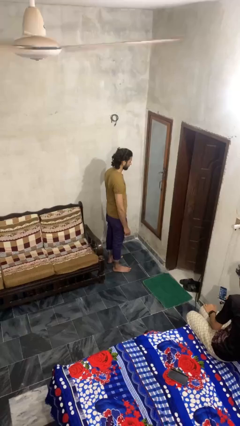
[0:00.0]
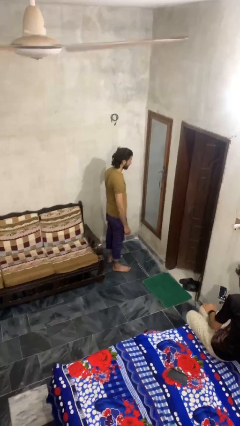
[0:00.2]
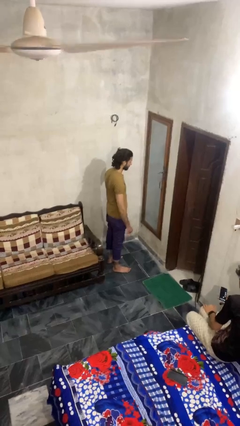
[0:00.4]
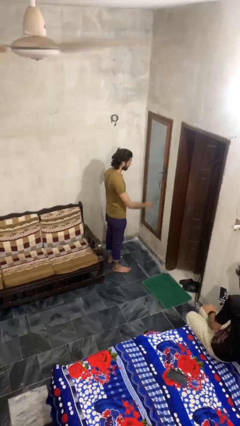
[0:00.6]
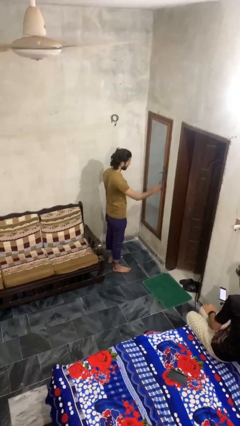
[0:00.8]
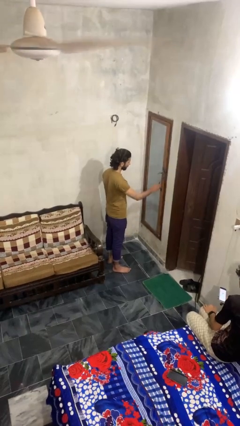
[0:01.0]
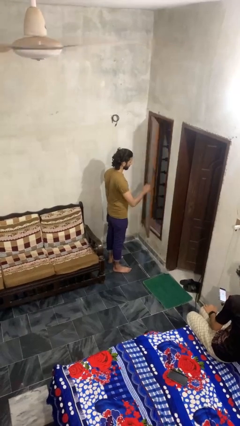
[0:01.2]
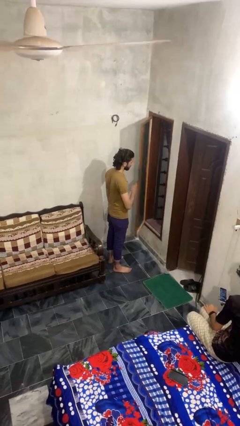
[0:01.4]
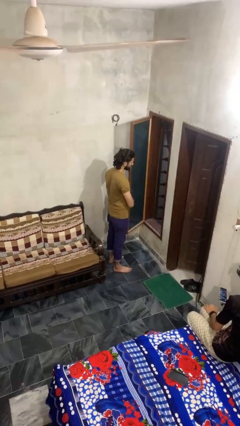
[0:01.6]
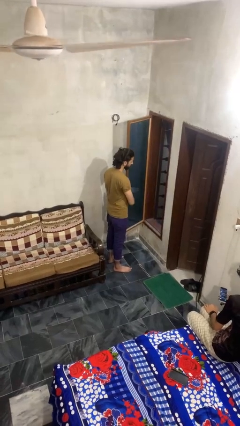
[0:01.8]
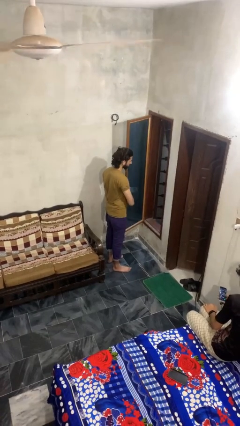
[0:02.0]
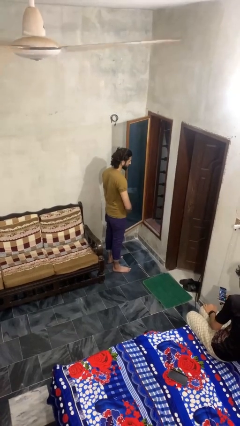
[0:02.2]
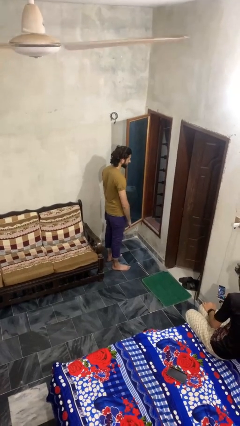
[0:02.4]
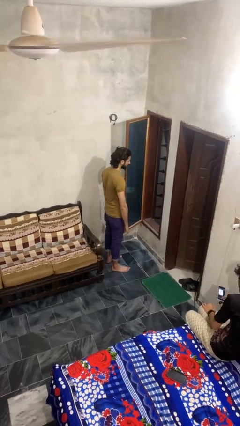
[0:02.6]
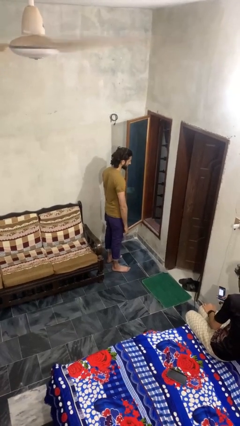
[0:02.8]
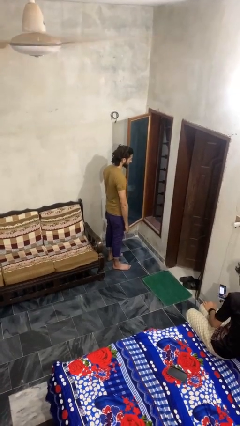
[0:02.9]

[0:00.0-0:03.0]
person opens home window

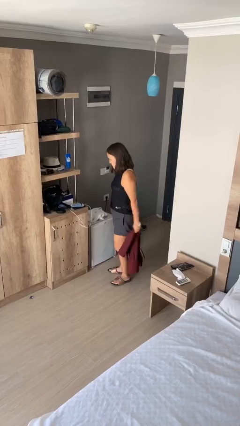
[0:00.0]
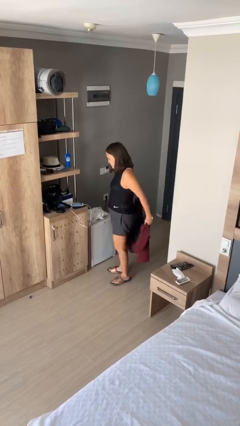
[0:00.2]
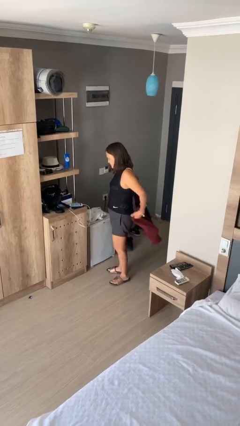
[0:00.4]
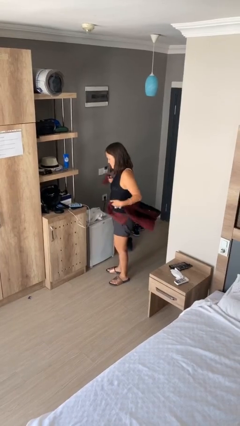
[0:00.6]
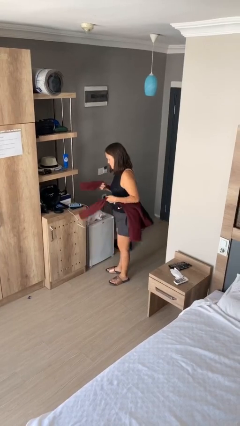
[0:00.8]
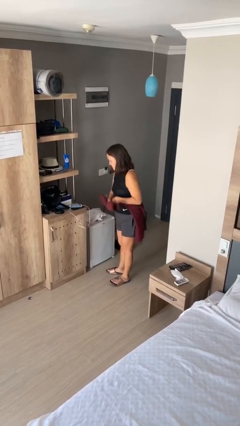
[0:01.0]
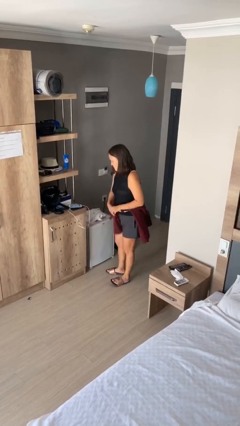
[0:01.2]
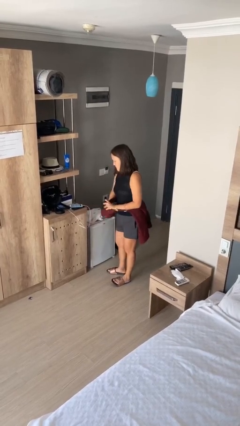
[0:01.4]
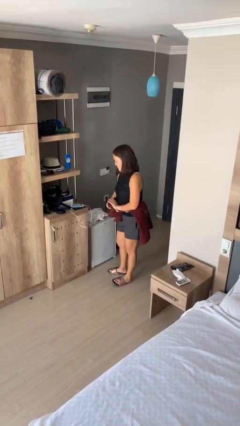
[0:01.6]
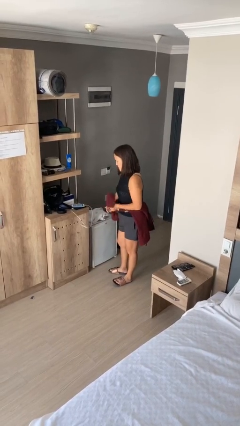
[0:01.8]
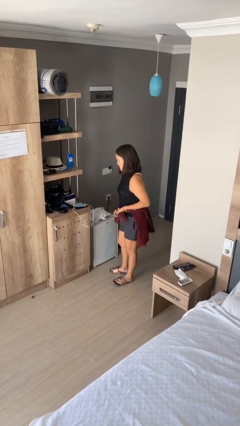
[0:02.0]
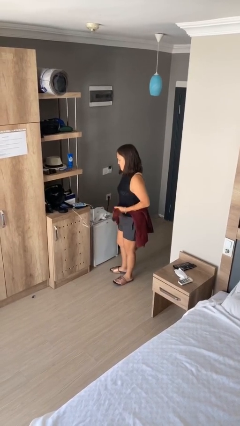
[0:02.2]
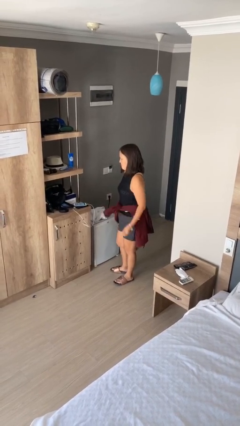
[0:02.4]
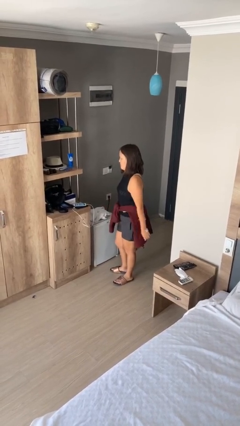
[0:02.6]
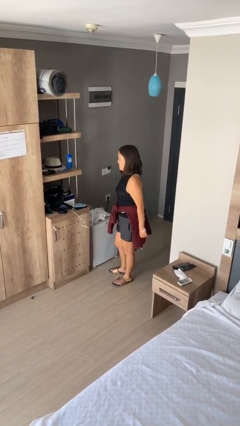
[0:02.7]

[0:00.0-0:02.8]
person ties jacket around waist

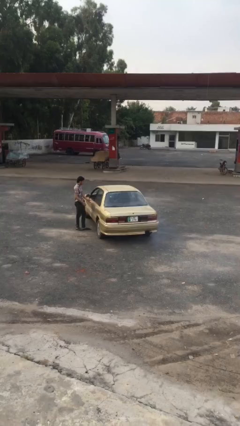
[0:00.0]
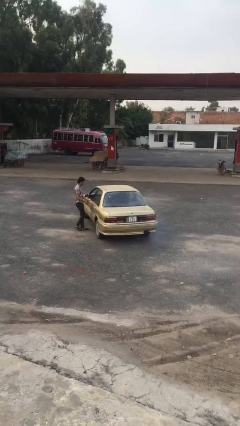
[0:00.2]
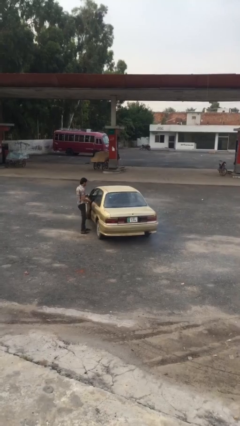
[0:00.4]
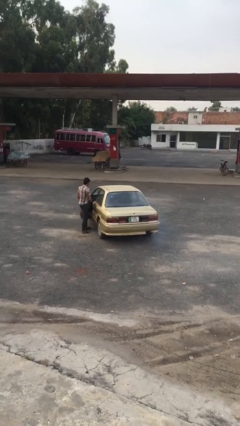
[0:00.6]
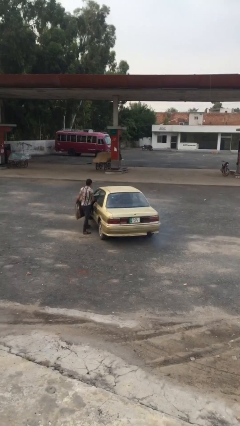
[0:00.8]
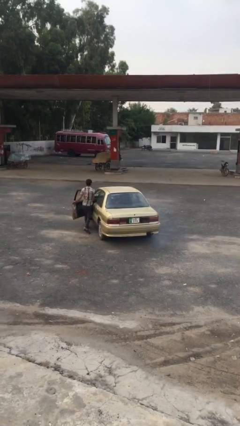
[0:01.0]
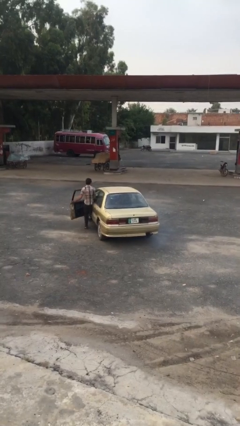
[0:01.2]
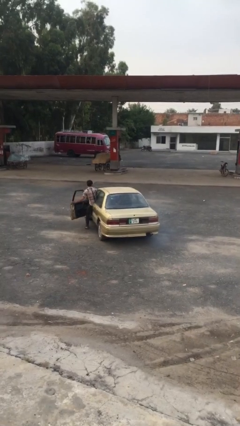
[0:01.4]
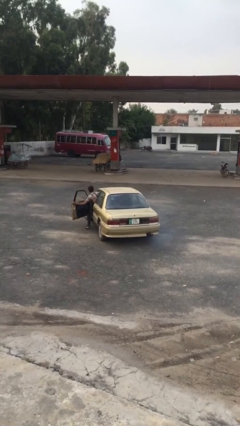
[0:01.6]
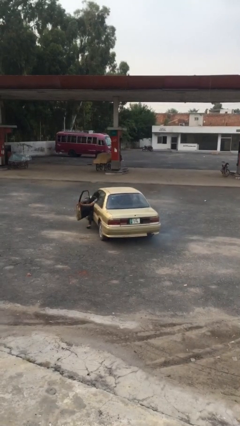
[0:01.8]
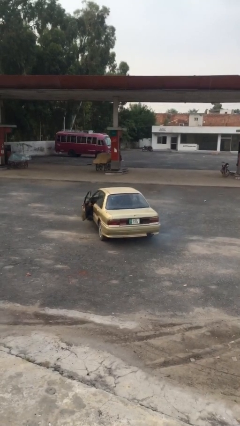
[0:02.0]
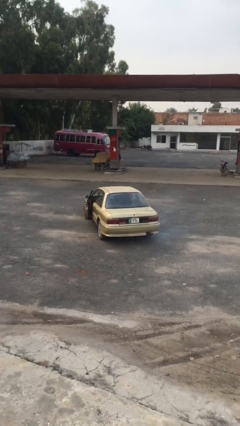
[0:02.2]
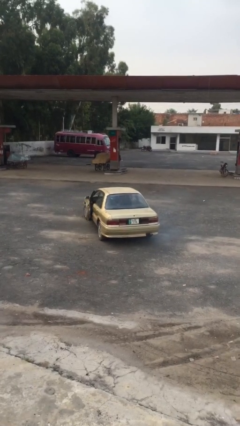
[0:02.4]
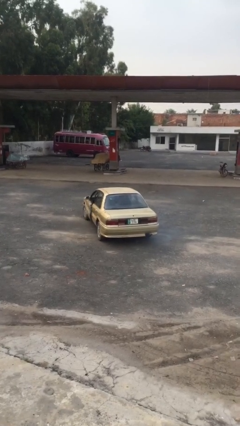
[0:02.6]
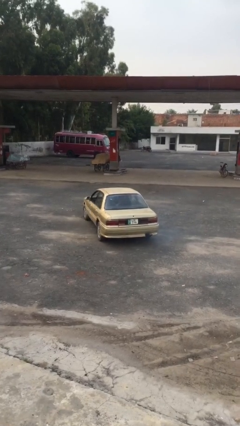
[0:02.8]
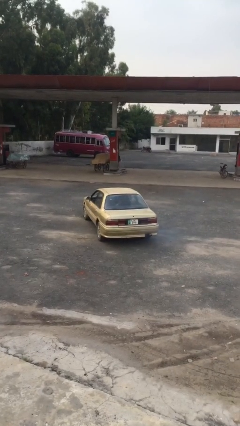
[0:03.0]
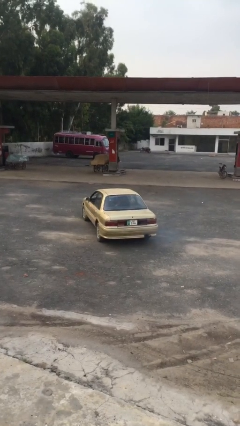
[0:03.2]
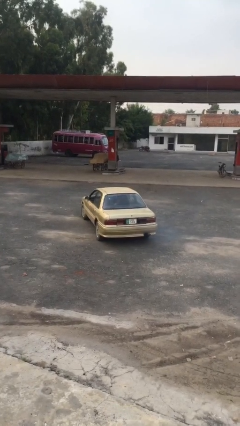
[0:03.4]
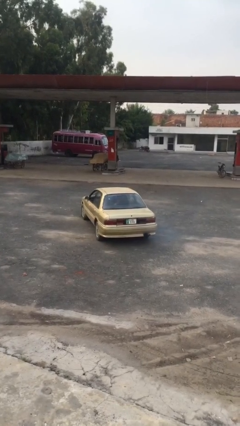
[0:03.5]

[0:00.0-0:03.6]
car picks up person

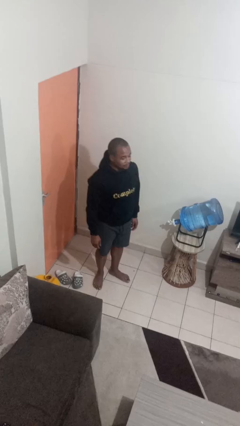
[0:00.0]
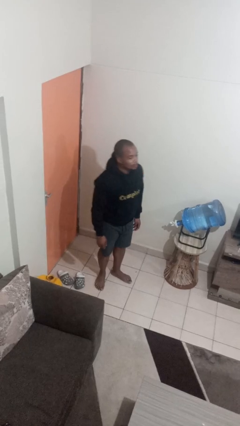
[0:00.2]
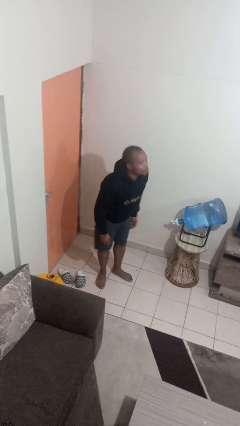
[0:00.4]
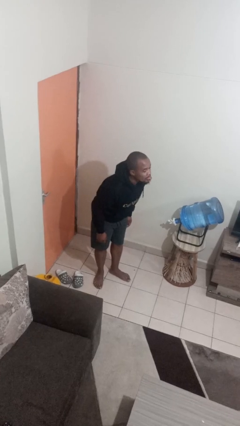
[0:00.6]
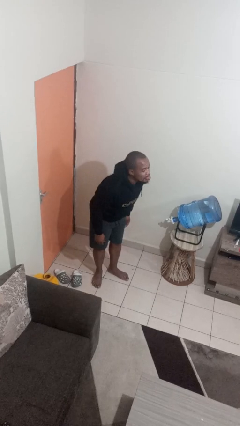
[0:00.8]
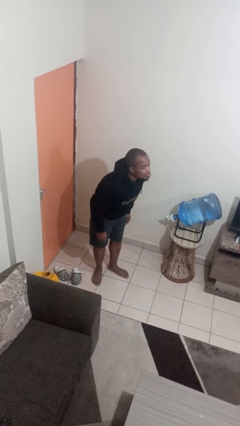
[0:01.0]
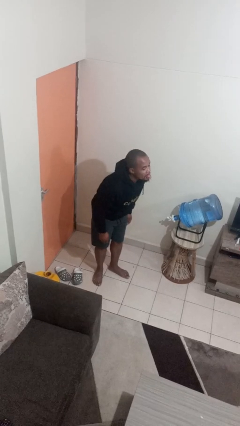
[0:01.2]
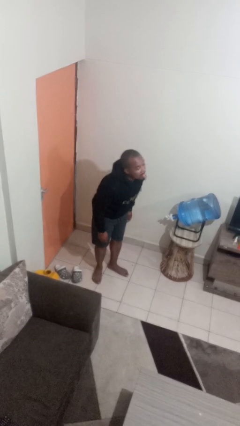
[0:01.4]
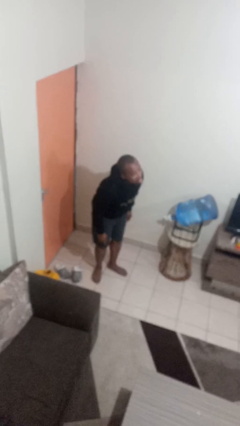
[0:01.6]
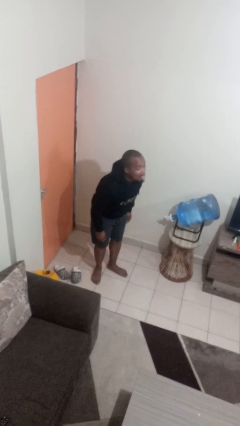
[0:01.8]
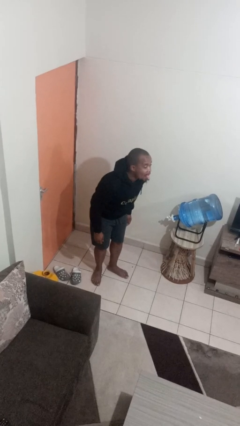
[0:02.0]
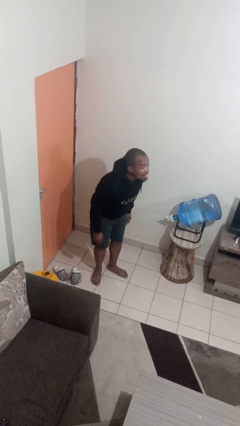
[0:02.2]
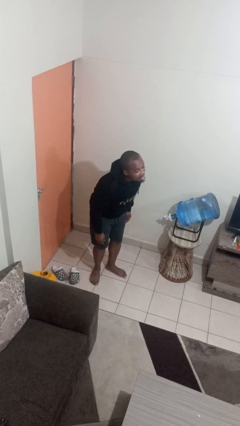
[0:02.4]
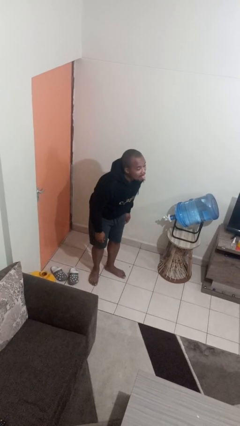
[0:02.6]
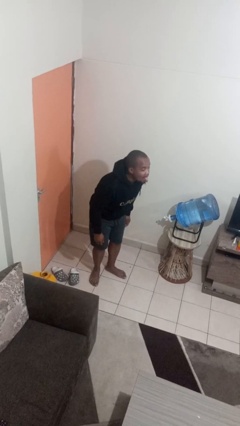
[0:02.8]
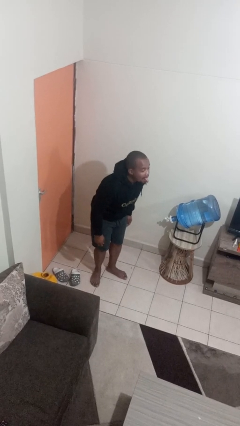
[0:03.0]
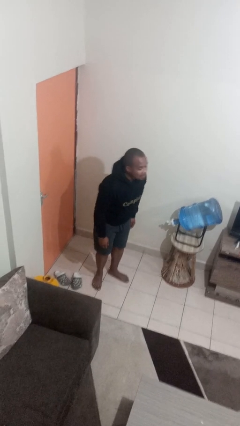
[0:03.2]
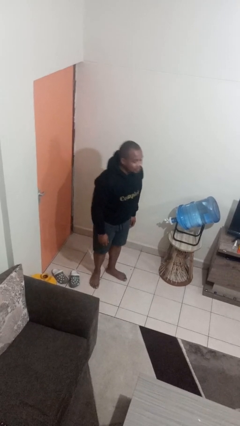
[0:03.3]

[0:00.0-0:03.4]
person sticks out tongue

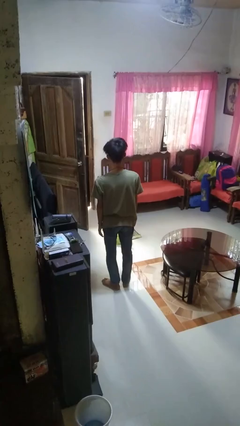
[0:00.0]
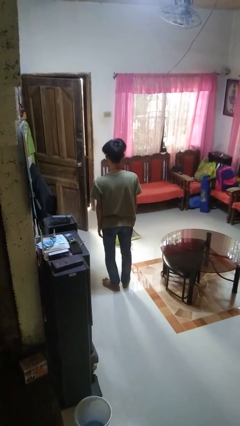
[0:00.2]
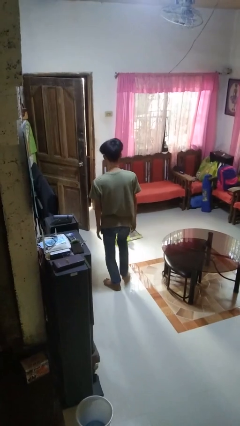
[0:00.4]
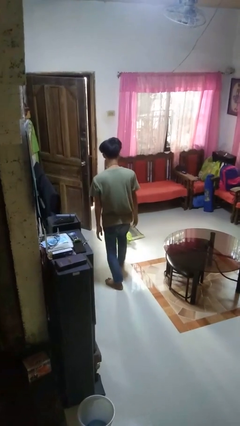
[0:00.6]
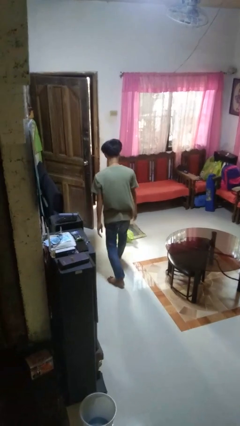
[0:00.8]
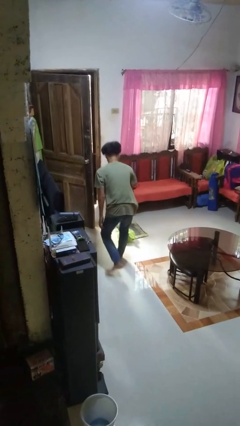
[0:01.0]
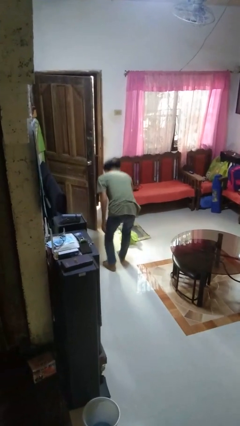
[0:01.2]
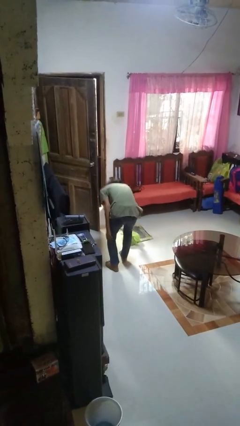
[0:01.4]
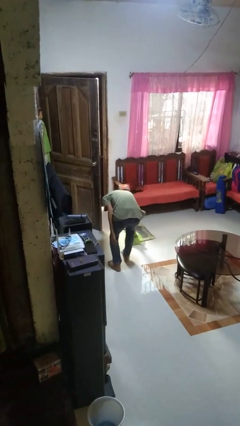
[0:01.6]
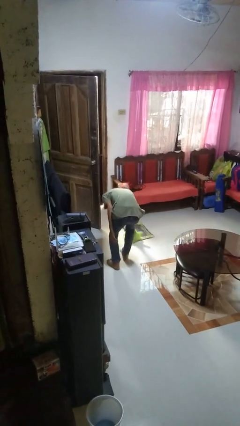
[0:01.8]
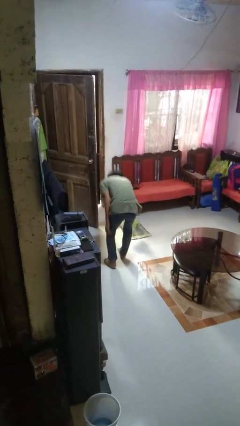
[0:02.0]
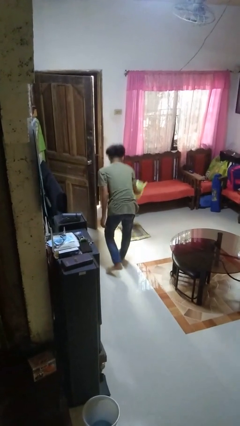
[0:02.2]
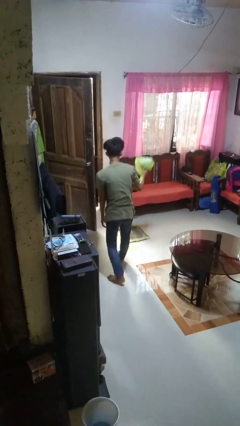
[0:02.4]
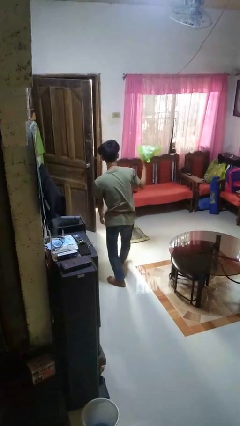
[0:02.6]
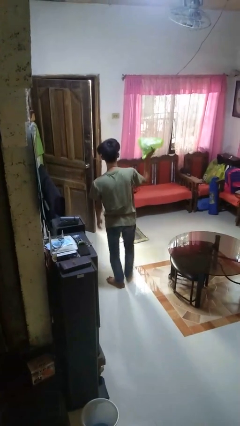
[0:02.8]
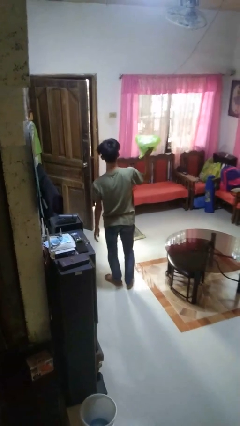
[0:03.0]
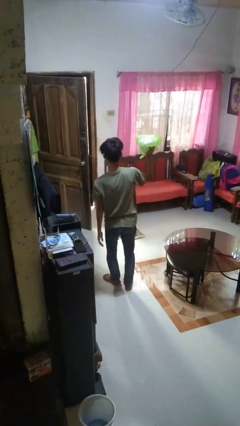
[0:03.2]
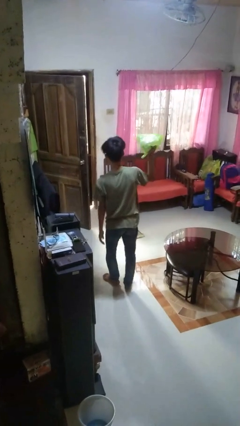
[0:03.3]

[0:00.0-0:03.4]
person picks up object from floor

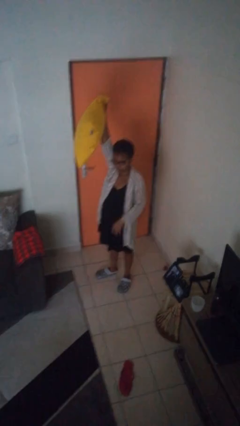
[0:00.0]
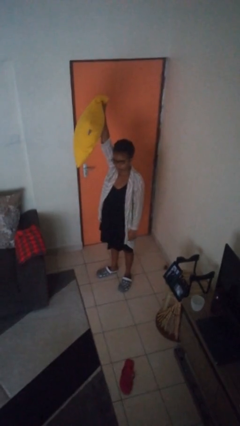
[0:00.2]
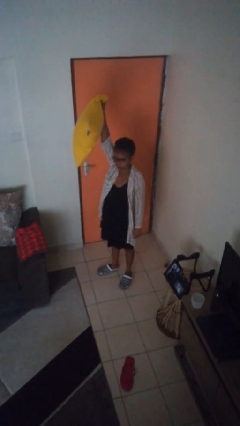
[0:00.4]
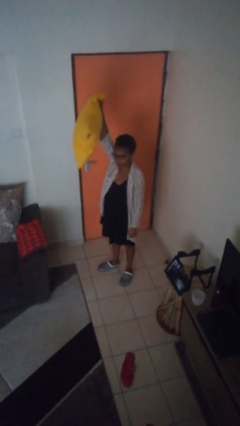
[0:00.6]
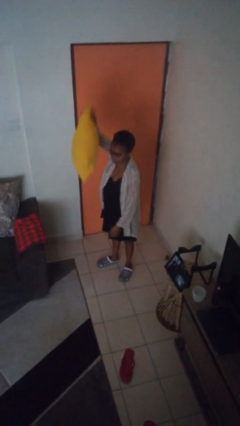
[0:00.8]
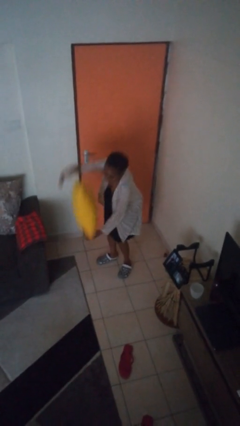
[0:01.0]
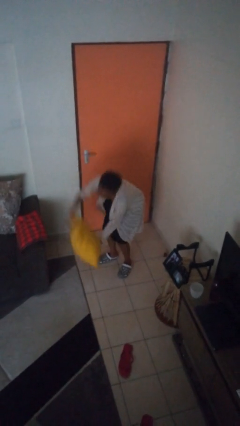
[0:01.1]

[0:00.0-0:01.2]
person drops object

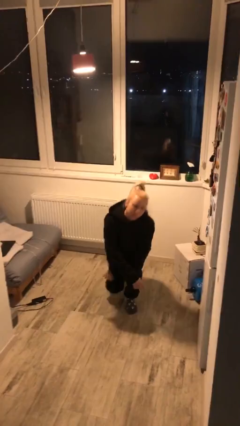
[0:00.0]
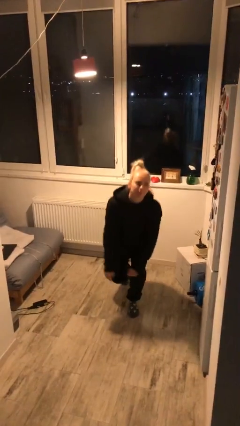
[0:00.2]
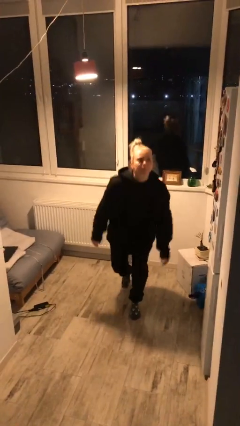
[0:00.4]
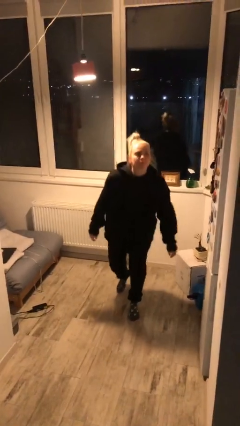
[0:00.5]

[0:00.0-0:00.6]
person stands up
